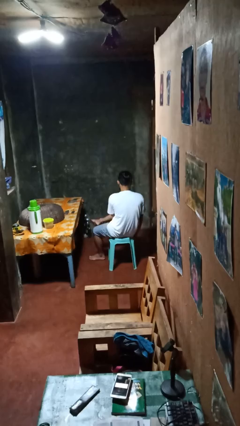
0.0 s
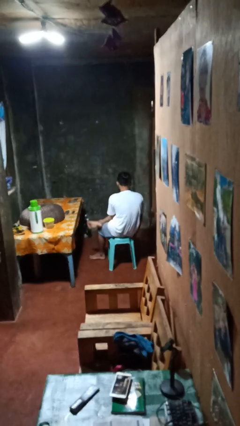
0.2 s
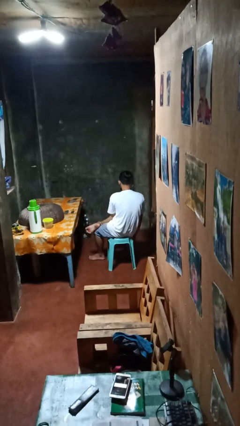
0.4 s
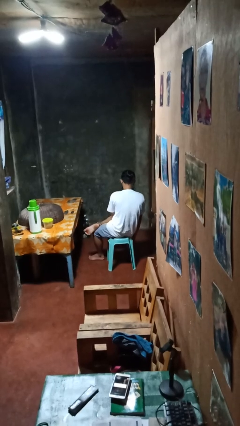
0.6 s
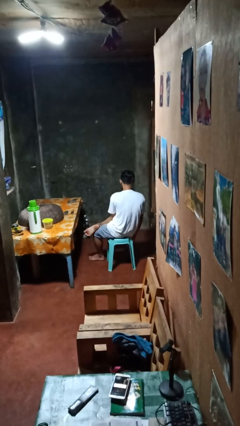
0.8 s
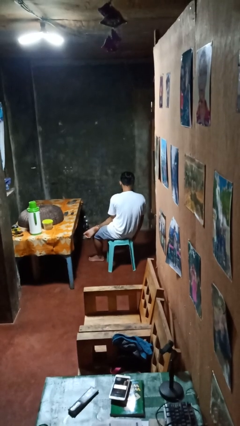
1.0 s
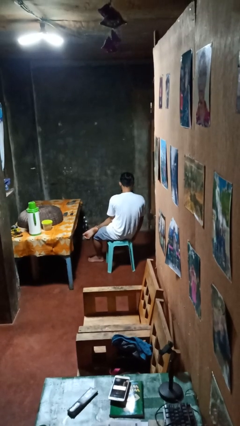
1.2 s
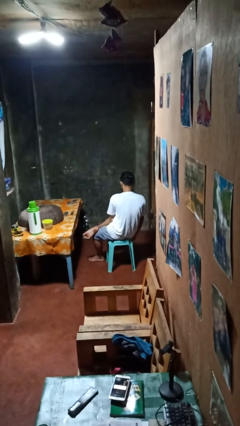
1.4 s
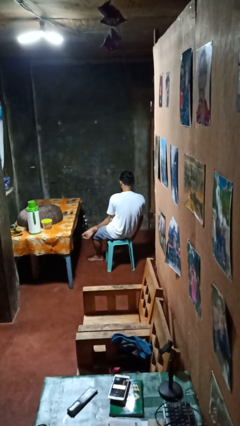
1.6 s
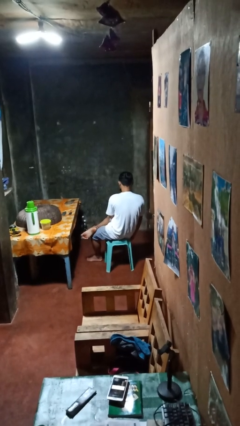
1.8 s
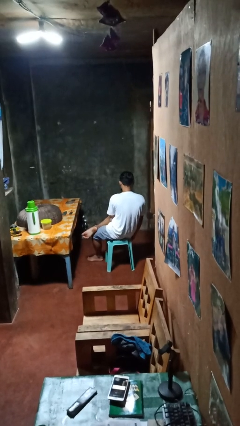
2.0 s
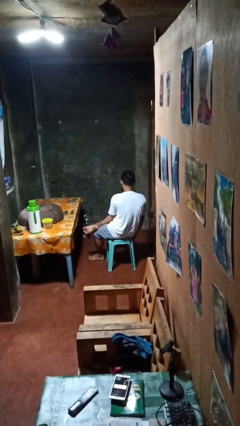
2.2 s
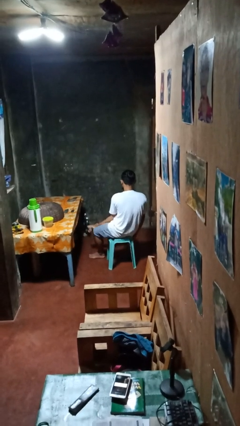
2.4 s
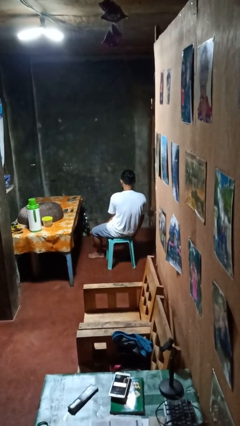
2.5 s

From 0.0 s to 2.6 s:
person crosses legs

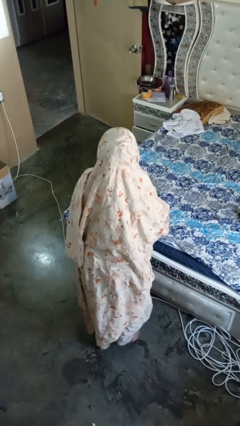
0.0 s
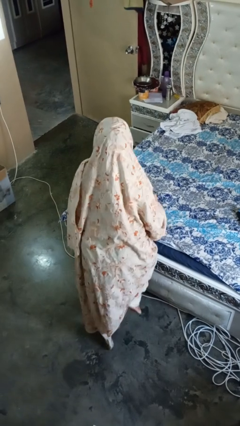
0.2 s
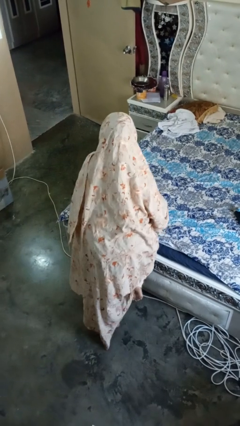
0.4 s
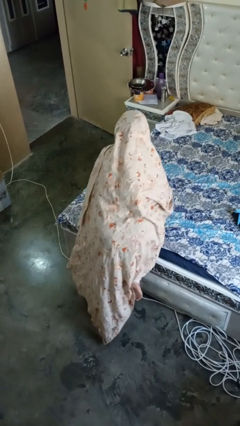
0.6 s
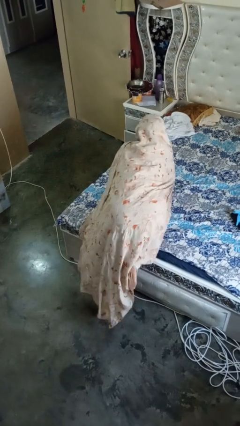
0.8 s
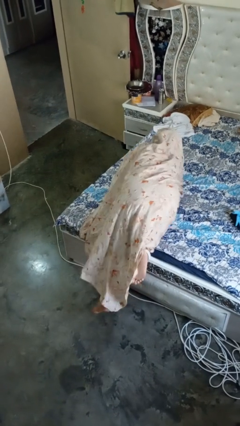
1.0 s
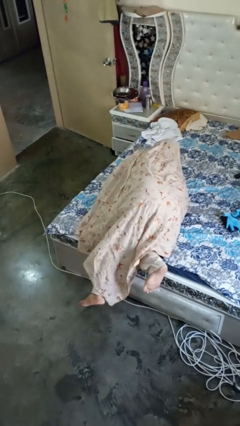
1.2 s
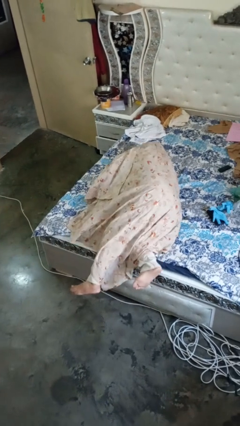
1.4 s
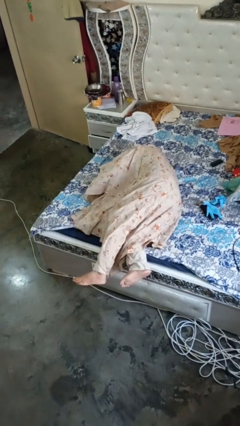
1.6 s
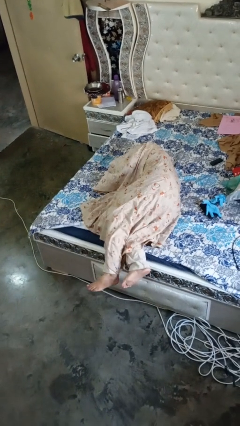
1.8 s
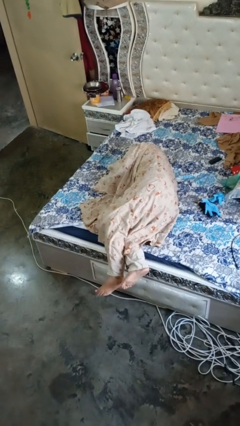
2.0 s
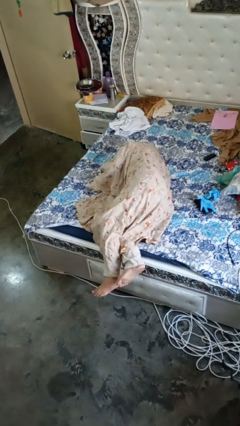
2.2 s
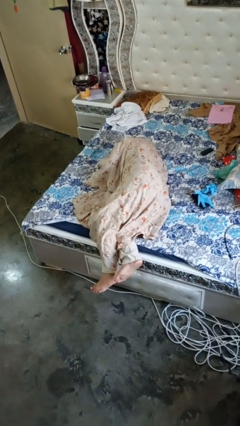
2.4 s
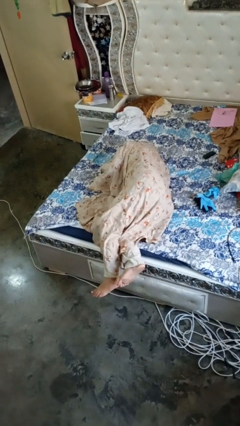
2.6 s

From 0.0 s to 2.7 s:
person lies down on bed

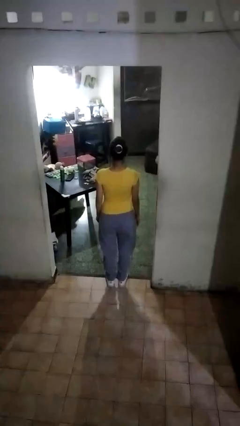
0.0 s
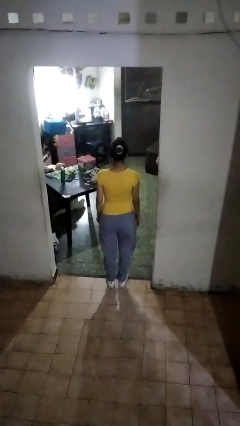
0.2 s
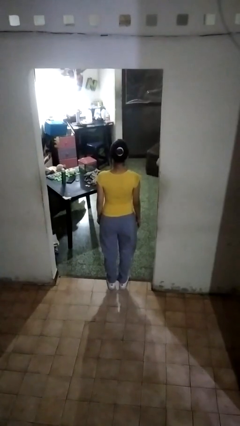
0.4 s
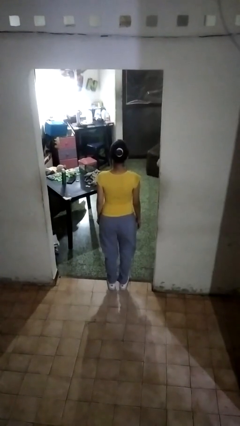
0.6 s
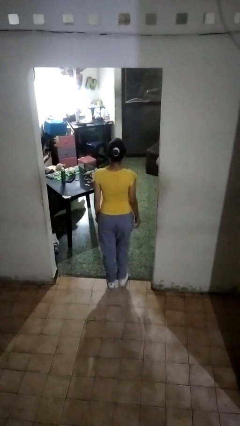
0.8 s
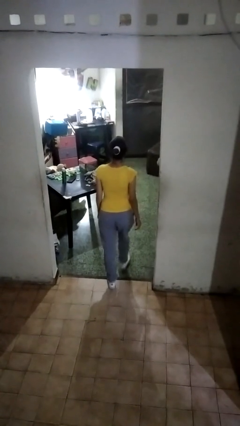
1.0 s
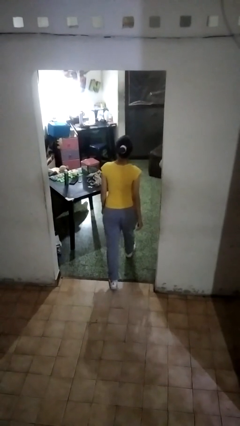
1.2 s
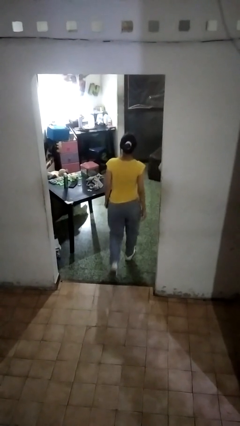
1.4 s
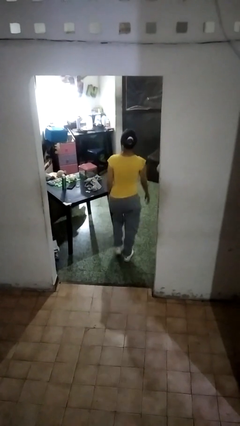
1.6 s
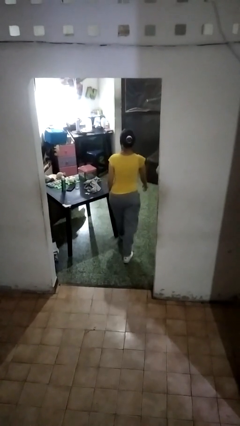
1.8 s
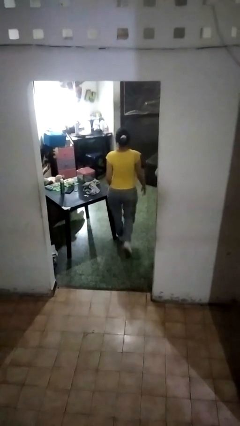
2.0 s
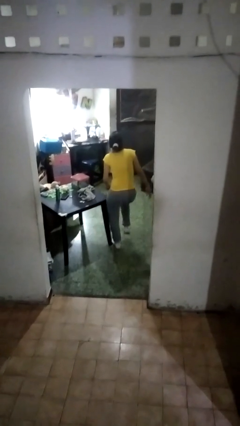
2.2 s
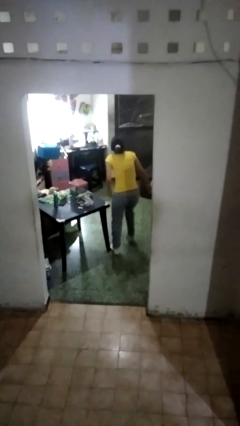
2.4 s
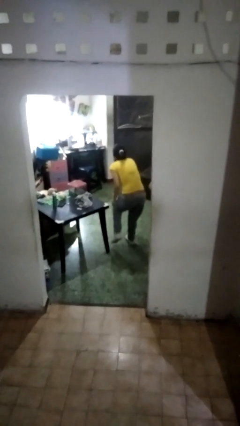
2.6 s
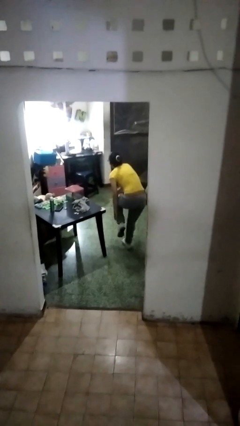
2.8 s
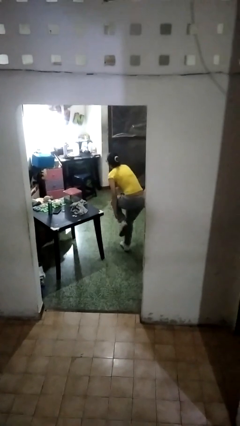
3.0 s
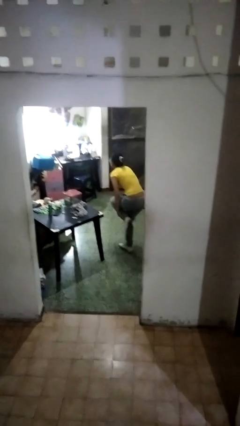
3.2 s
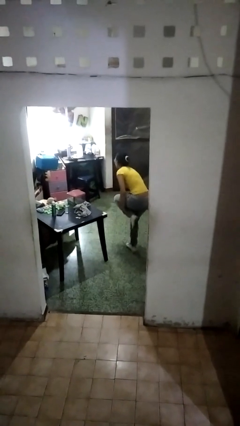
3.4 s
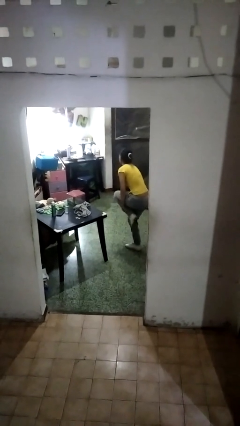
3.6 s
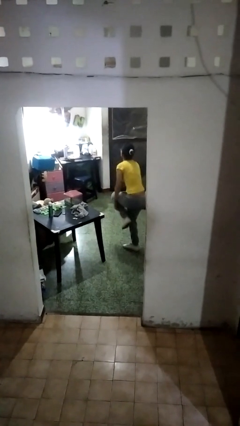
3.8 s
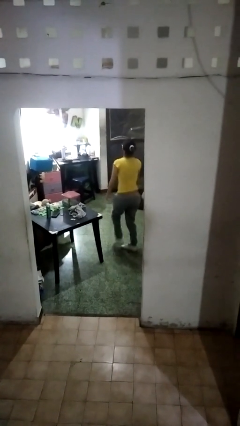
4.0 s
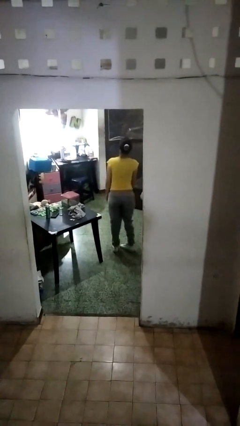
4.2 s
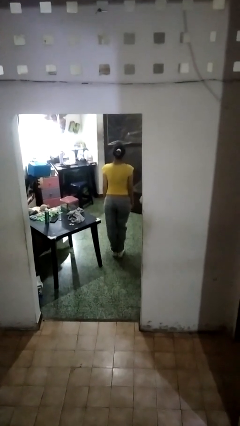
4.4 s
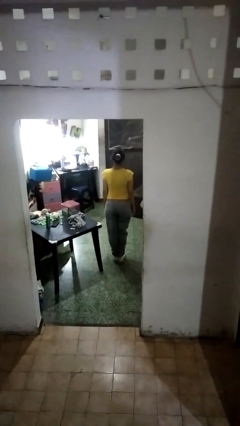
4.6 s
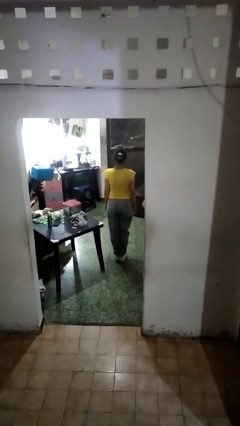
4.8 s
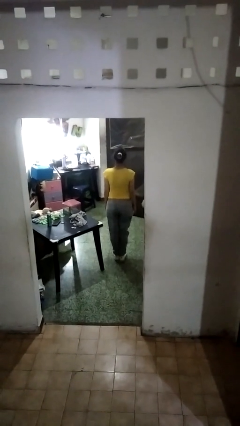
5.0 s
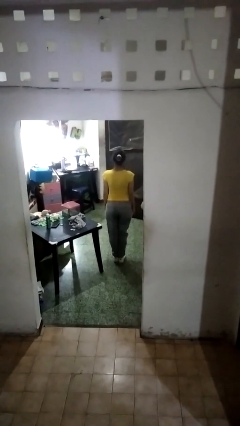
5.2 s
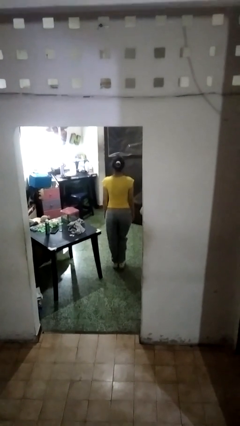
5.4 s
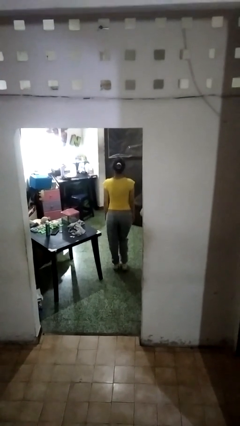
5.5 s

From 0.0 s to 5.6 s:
person bumps into table

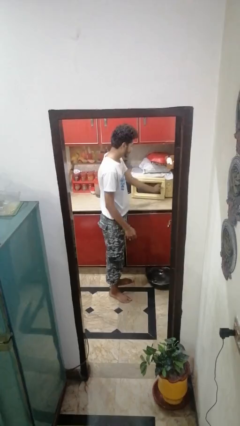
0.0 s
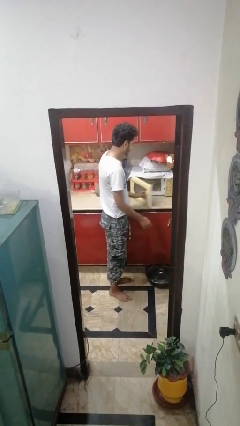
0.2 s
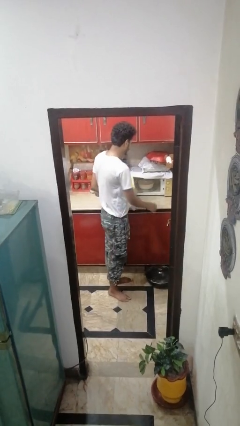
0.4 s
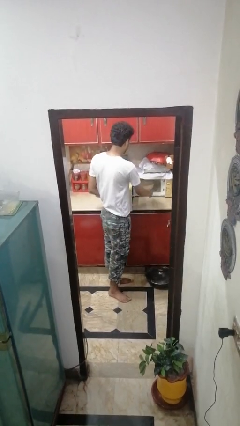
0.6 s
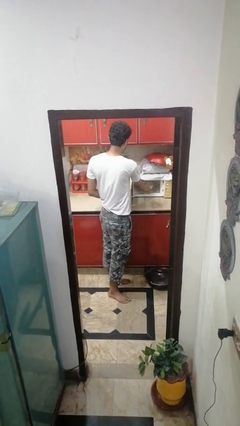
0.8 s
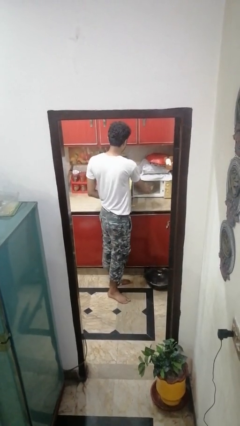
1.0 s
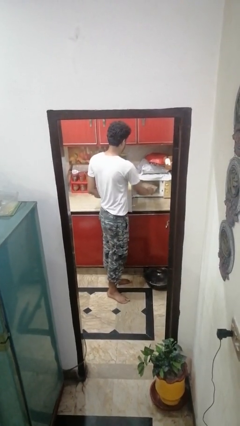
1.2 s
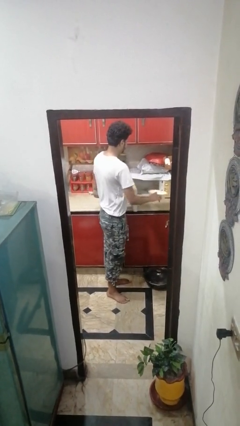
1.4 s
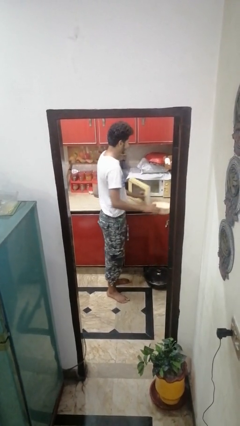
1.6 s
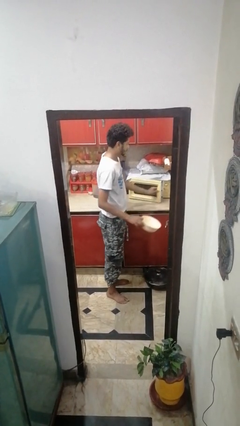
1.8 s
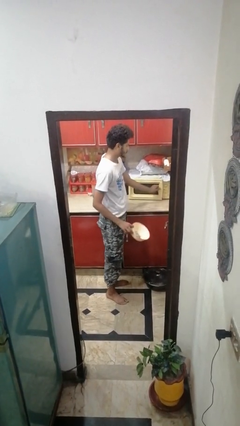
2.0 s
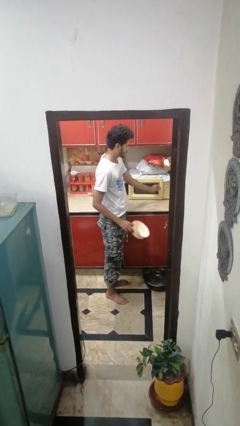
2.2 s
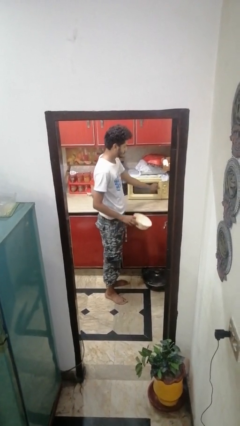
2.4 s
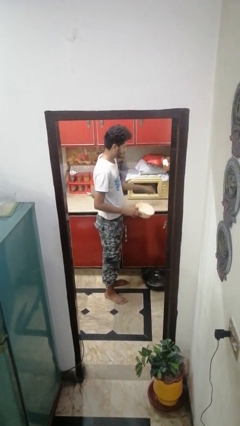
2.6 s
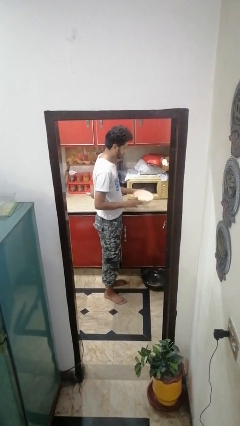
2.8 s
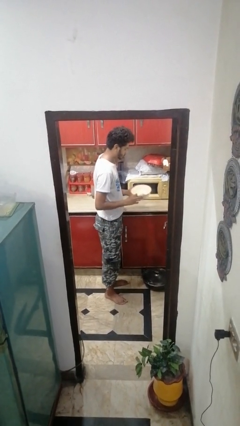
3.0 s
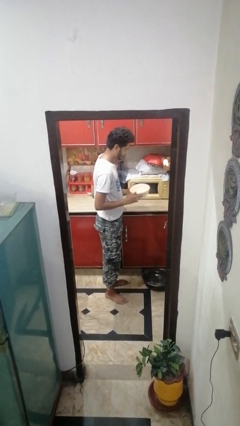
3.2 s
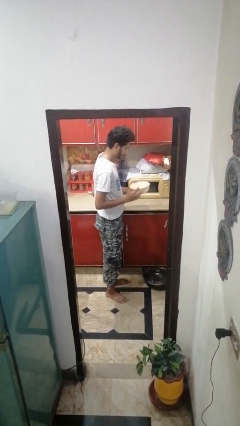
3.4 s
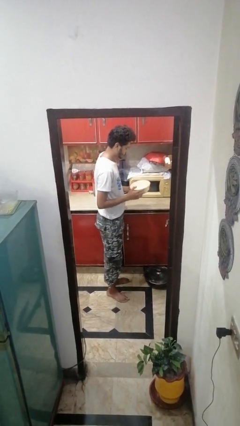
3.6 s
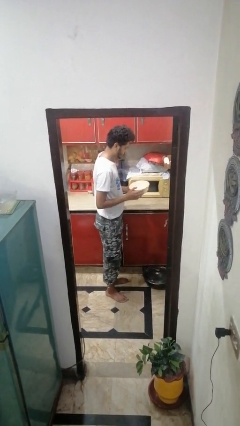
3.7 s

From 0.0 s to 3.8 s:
person takes object from microwave

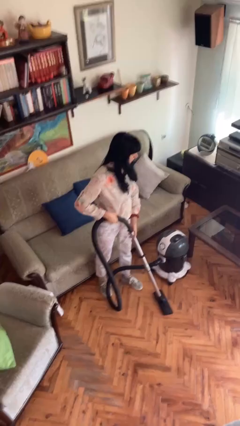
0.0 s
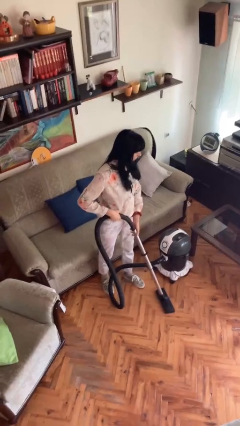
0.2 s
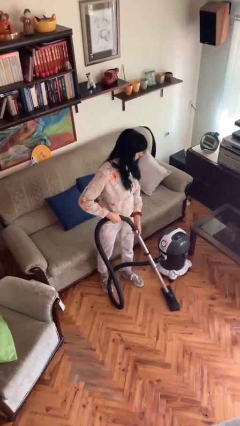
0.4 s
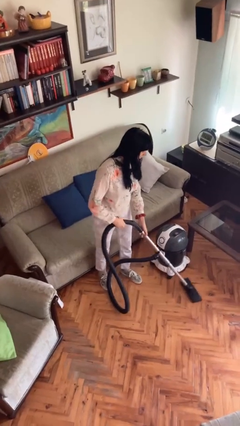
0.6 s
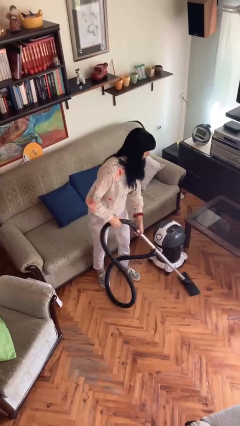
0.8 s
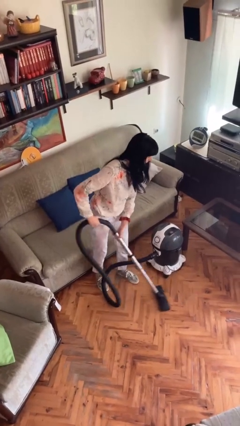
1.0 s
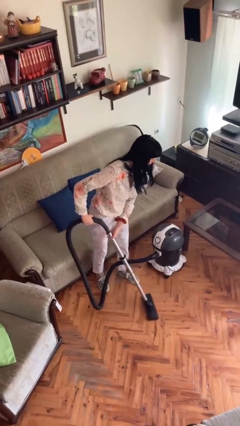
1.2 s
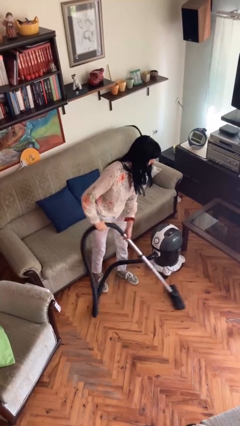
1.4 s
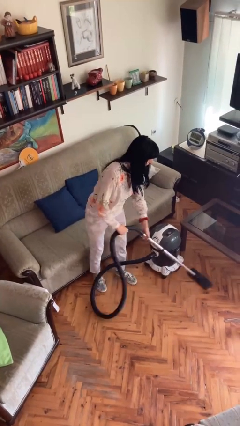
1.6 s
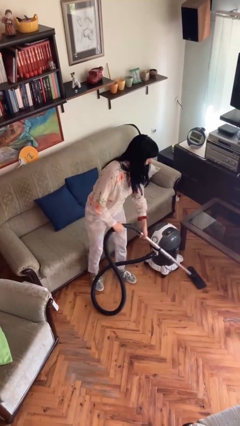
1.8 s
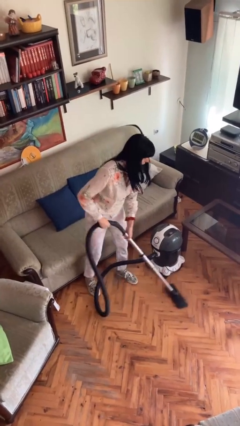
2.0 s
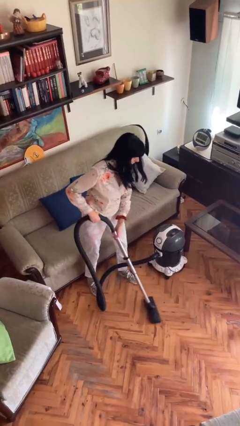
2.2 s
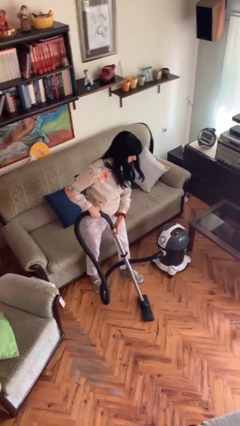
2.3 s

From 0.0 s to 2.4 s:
person vacuums carpet
